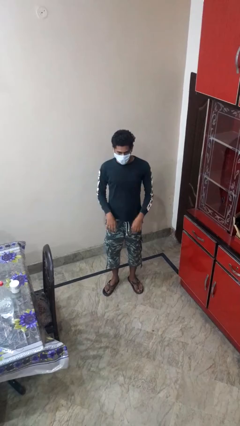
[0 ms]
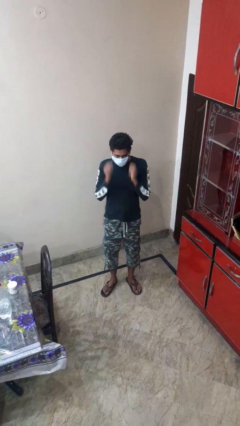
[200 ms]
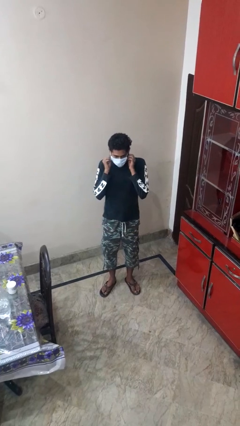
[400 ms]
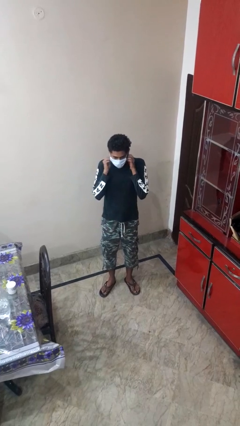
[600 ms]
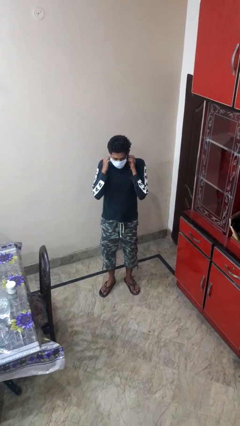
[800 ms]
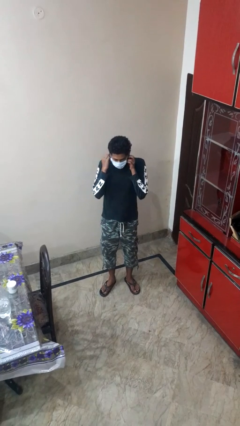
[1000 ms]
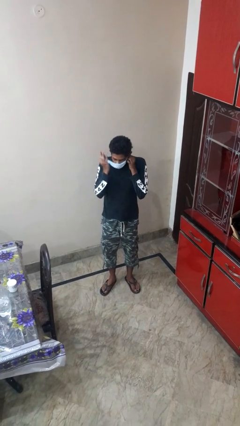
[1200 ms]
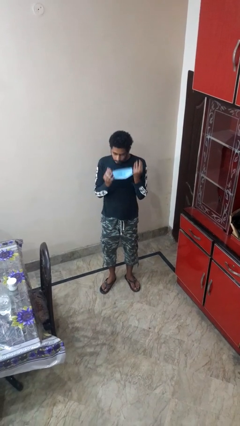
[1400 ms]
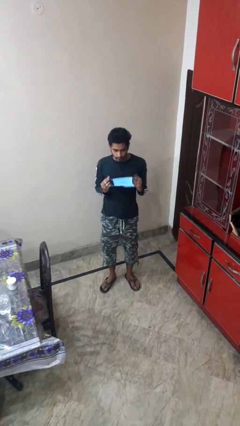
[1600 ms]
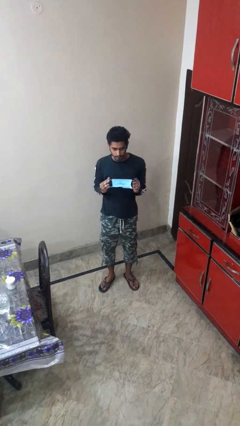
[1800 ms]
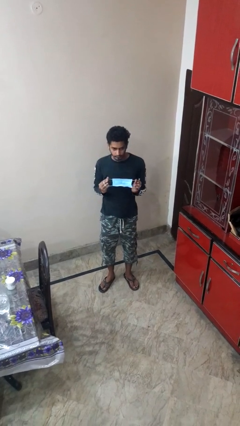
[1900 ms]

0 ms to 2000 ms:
person takes off facemask

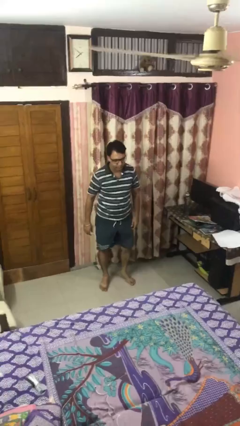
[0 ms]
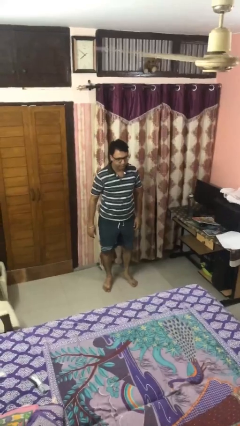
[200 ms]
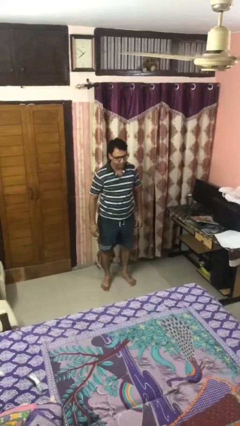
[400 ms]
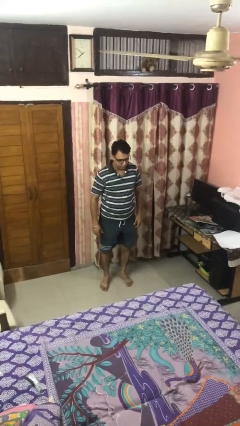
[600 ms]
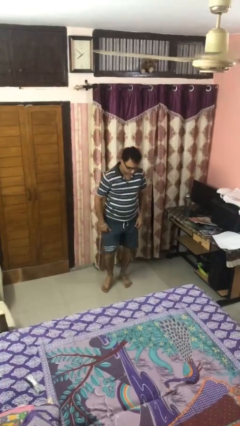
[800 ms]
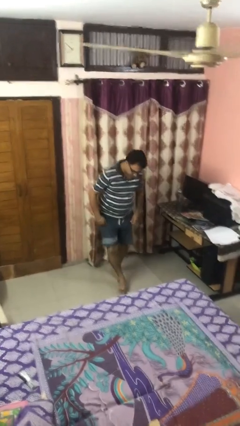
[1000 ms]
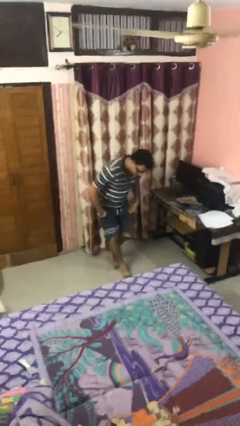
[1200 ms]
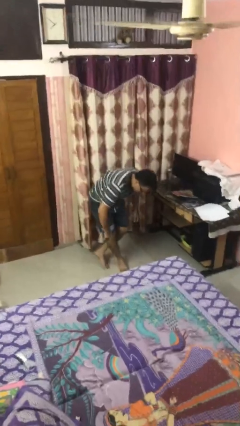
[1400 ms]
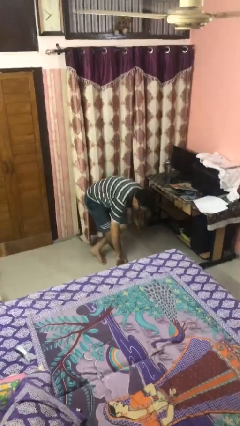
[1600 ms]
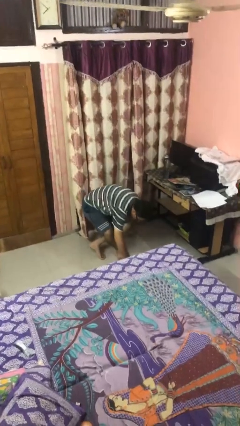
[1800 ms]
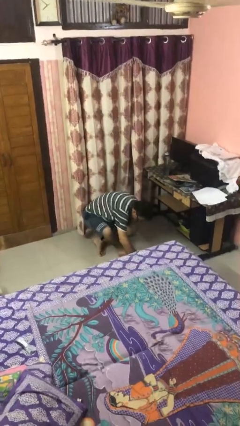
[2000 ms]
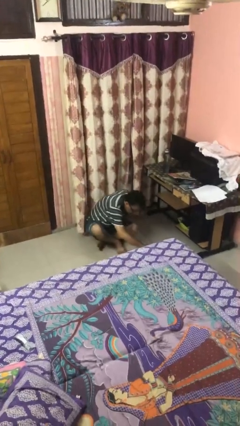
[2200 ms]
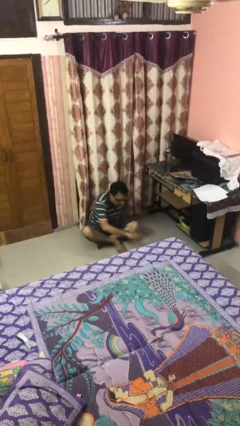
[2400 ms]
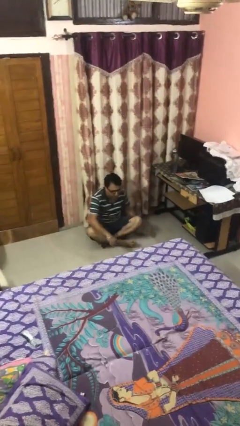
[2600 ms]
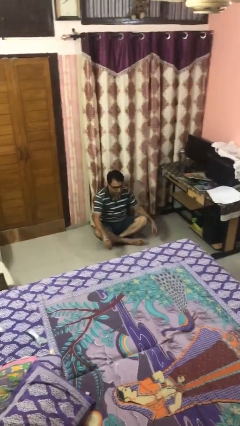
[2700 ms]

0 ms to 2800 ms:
person sits crisscross

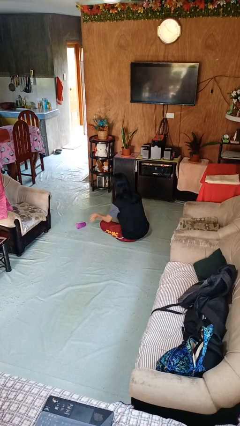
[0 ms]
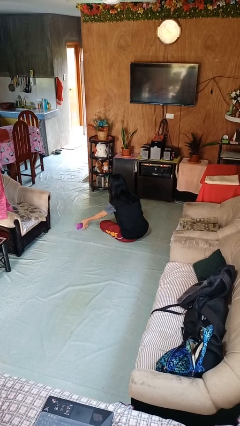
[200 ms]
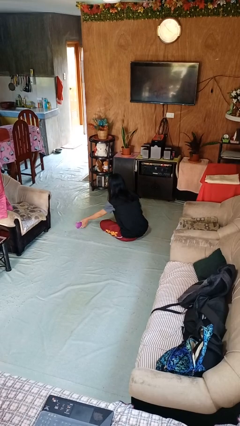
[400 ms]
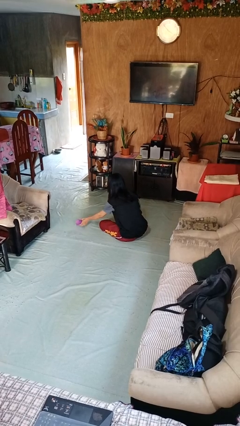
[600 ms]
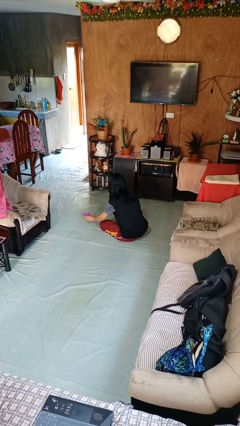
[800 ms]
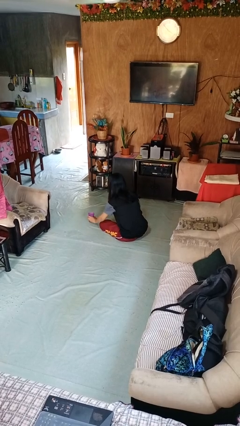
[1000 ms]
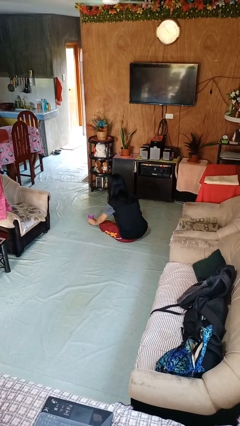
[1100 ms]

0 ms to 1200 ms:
person sets upright glass

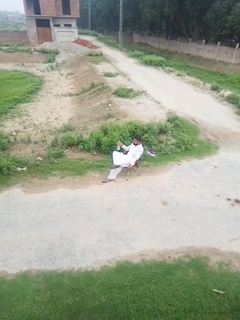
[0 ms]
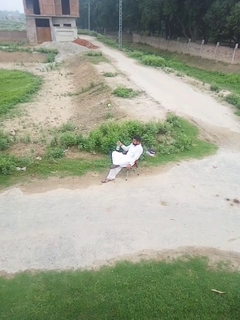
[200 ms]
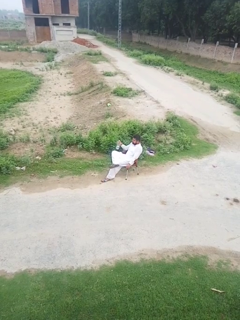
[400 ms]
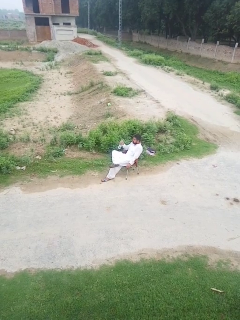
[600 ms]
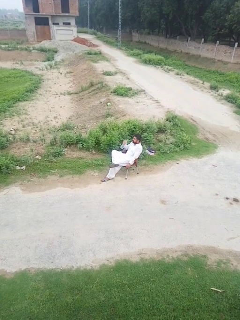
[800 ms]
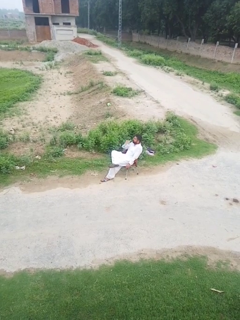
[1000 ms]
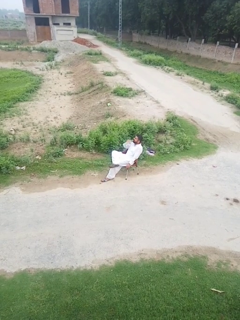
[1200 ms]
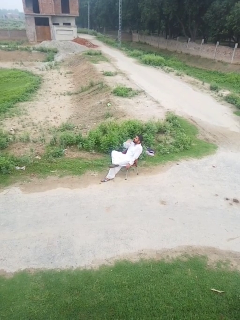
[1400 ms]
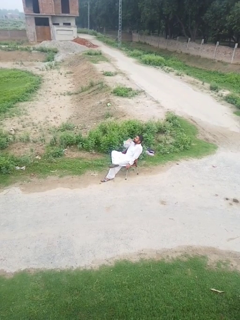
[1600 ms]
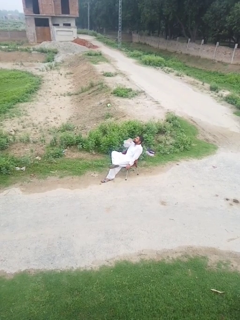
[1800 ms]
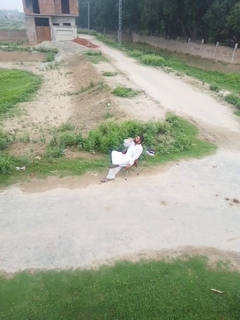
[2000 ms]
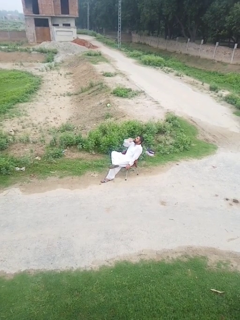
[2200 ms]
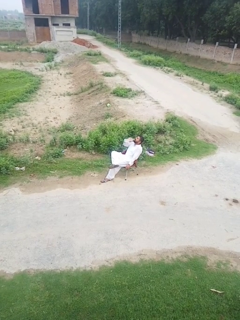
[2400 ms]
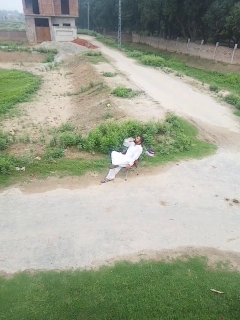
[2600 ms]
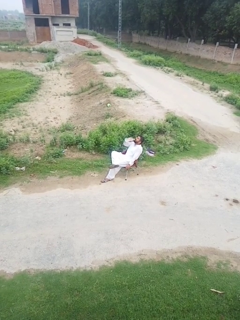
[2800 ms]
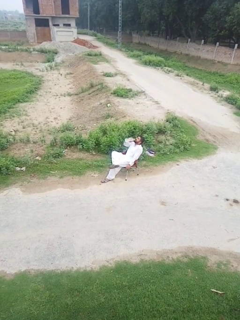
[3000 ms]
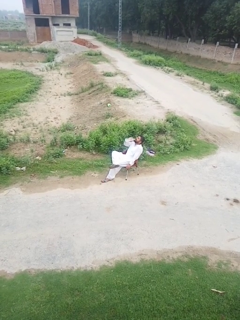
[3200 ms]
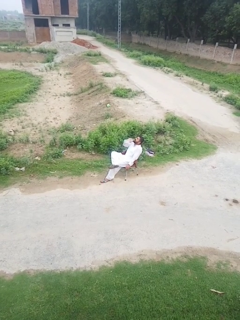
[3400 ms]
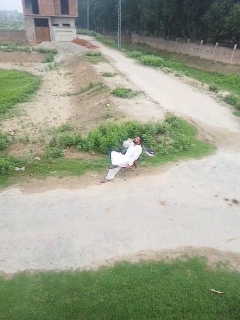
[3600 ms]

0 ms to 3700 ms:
person drinks from bottle

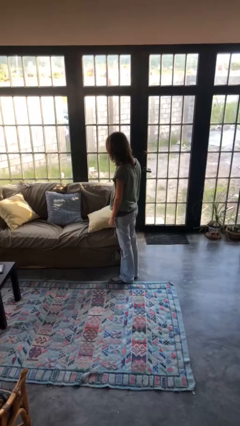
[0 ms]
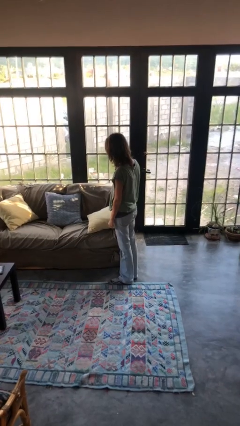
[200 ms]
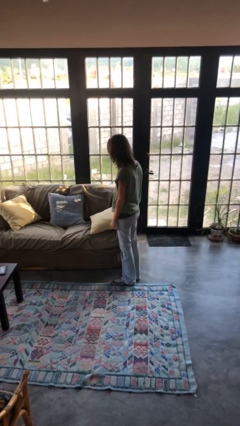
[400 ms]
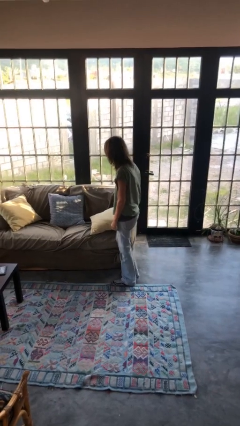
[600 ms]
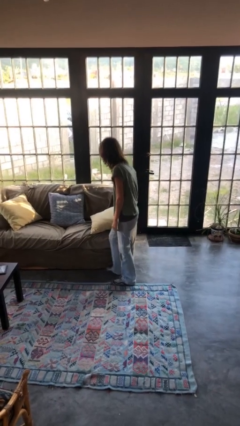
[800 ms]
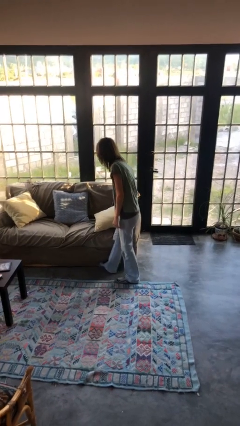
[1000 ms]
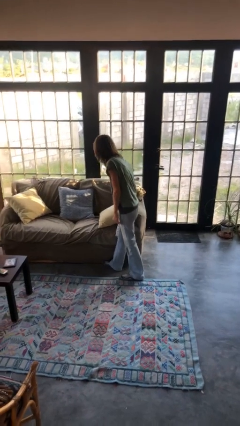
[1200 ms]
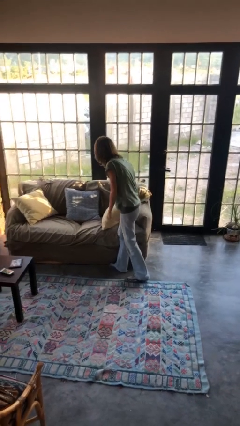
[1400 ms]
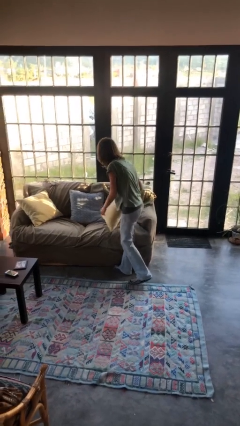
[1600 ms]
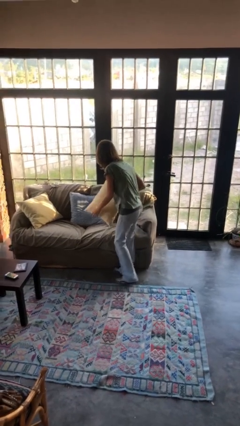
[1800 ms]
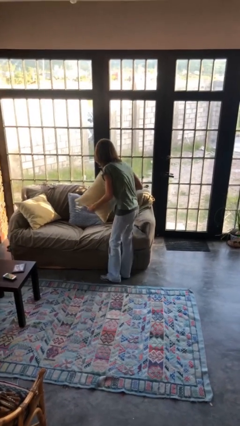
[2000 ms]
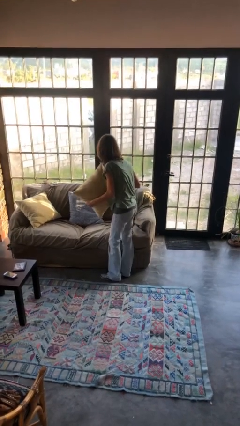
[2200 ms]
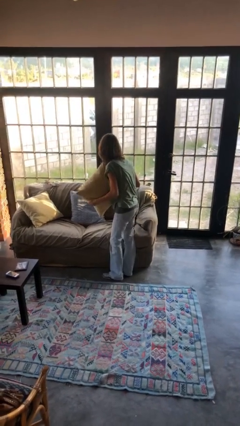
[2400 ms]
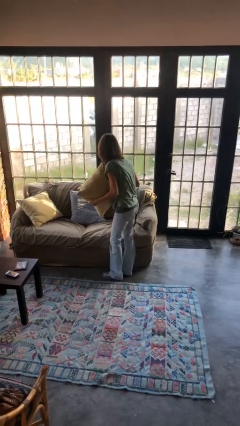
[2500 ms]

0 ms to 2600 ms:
person picks up object from couch

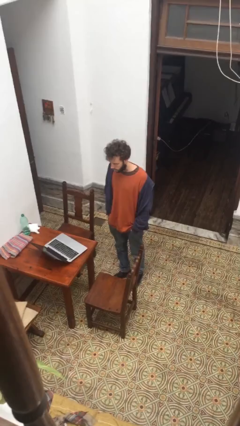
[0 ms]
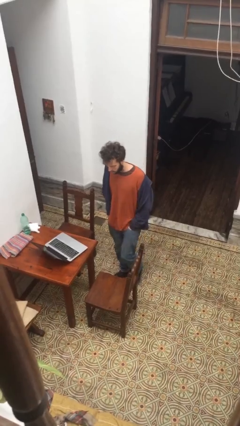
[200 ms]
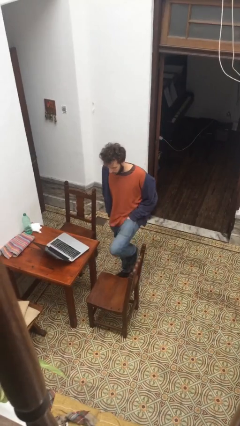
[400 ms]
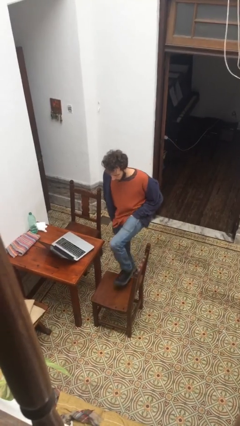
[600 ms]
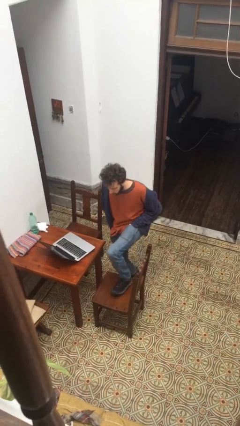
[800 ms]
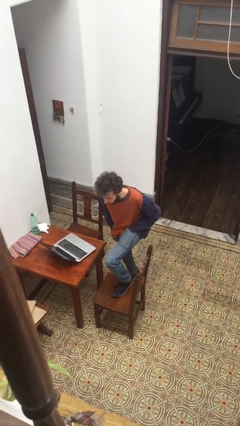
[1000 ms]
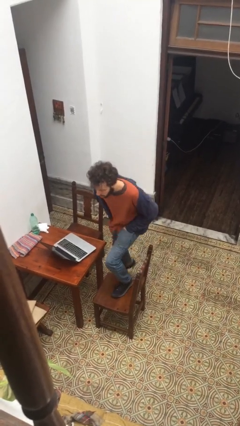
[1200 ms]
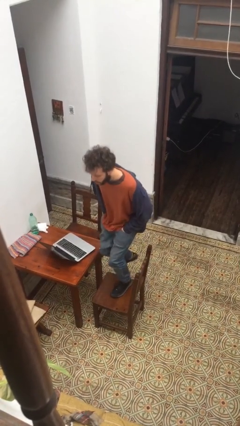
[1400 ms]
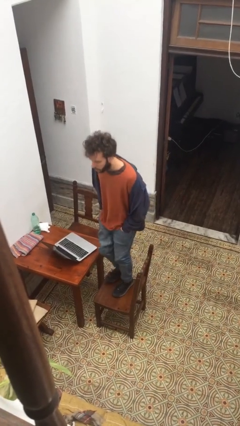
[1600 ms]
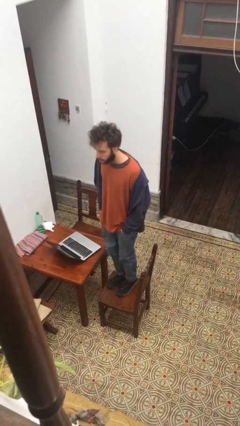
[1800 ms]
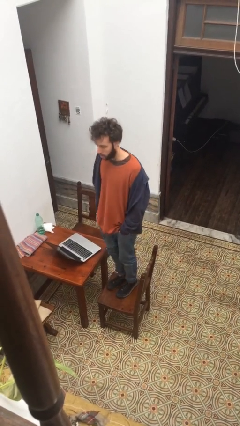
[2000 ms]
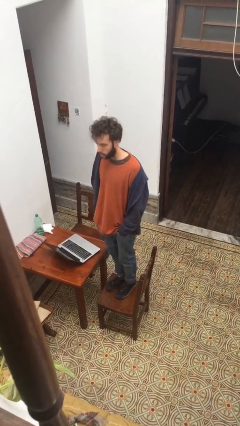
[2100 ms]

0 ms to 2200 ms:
person climbs on chair

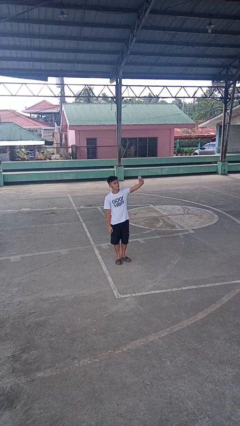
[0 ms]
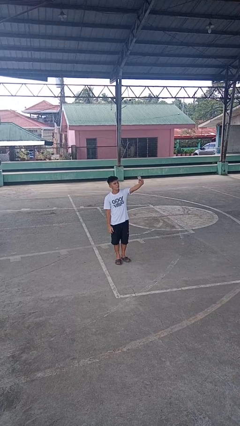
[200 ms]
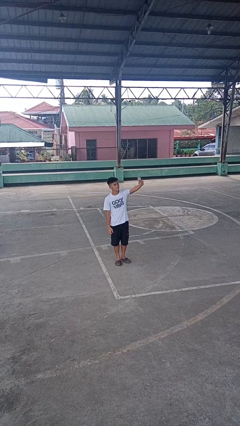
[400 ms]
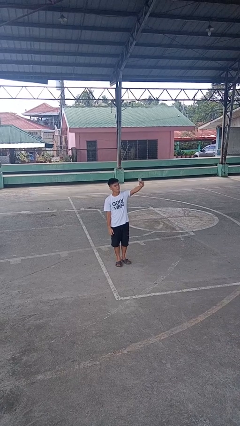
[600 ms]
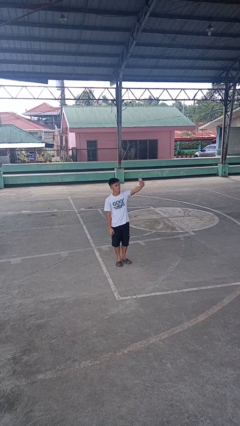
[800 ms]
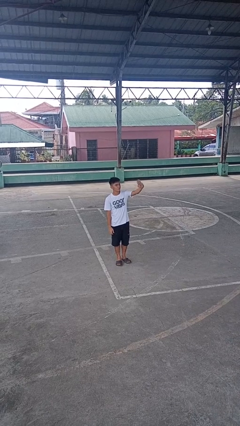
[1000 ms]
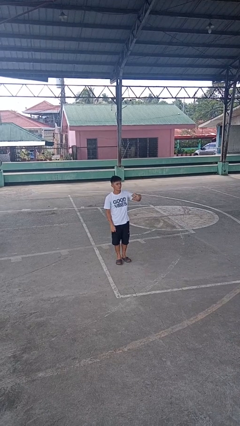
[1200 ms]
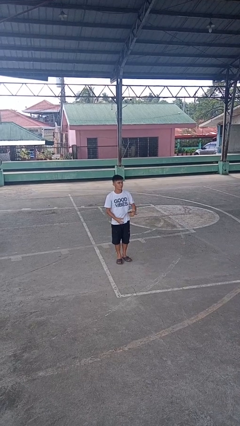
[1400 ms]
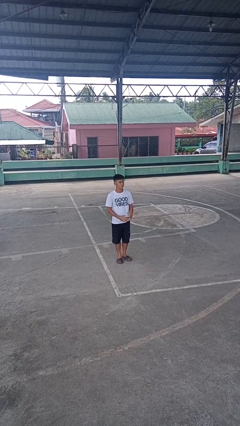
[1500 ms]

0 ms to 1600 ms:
person takes selfie

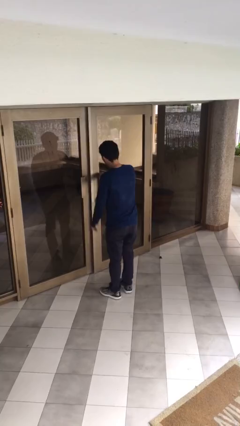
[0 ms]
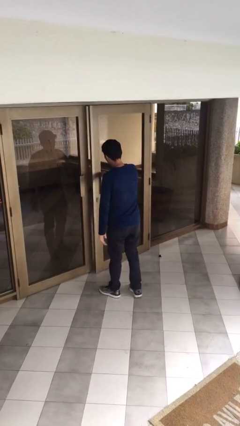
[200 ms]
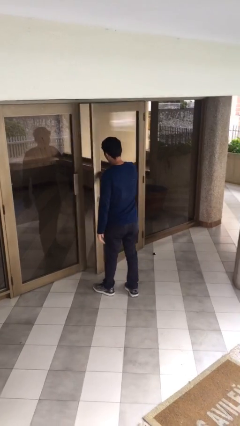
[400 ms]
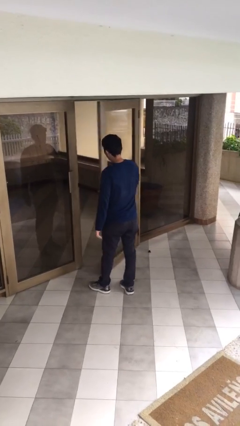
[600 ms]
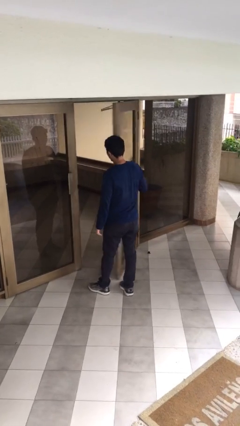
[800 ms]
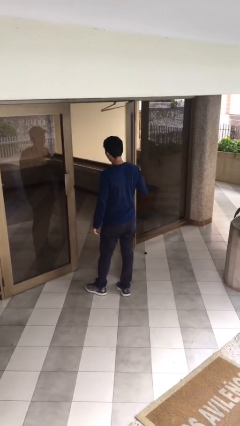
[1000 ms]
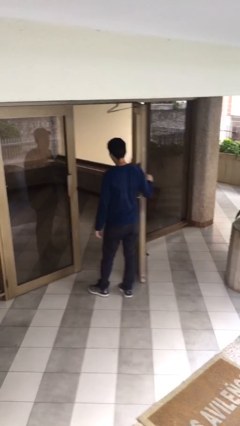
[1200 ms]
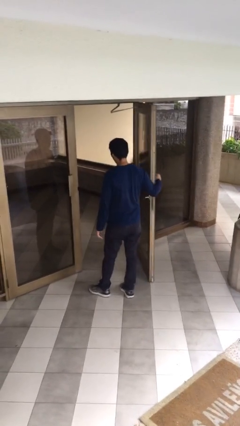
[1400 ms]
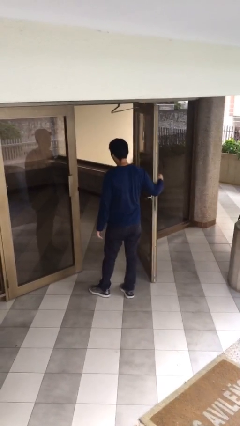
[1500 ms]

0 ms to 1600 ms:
person opens facility door

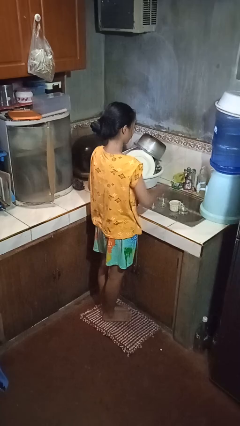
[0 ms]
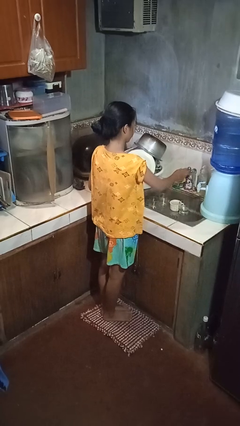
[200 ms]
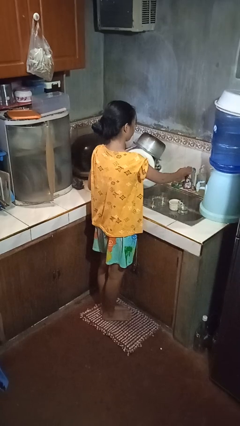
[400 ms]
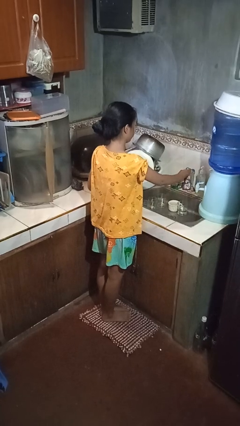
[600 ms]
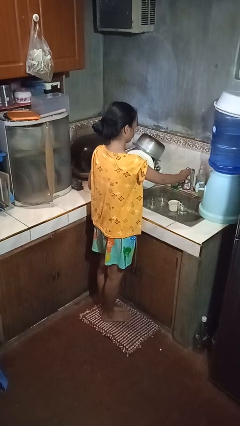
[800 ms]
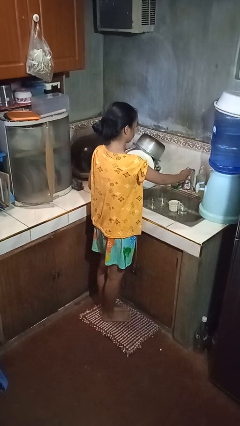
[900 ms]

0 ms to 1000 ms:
person turns on faucet
